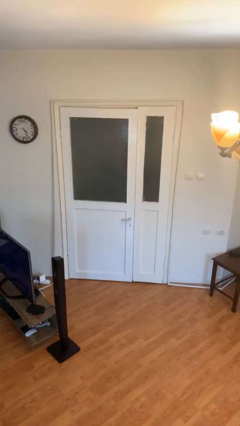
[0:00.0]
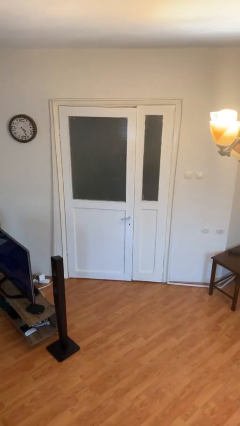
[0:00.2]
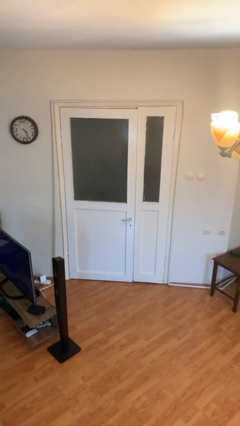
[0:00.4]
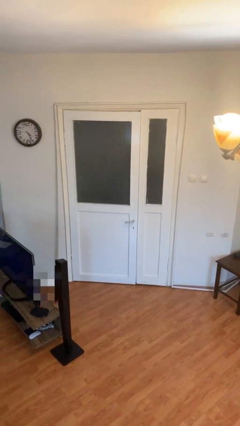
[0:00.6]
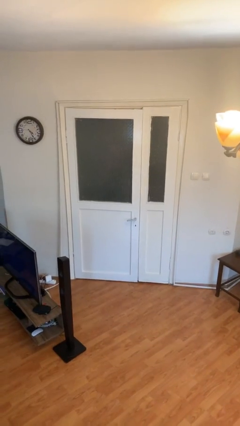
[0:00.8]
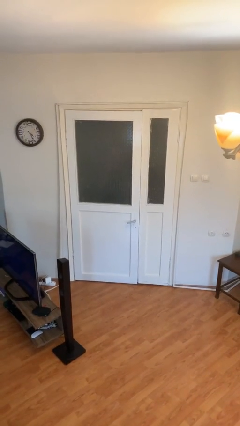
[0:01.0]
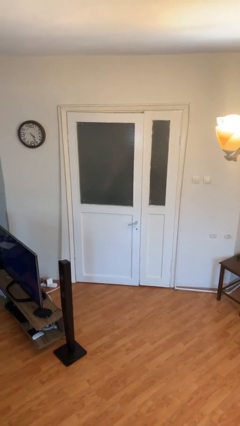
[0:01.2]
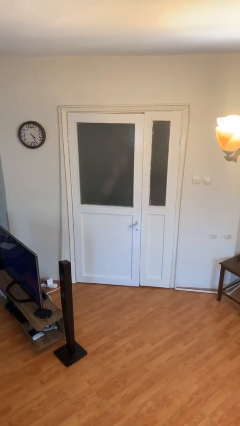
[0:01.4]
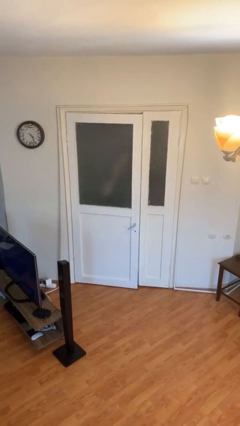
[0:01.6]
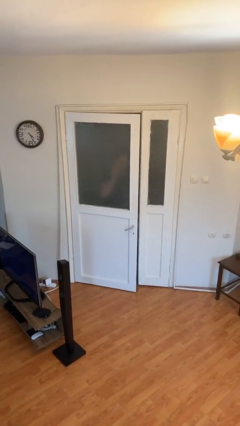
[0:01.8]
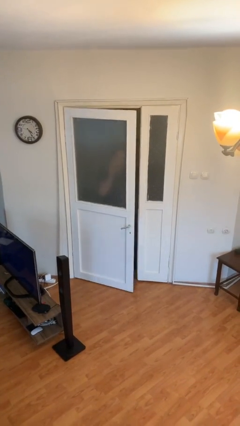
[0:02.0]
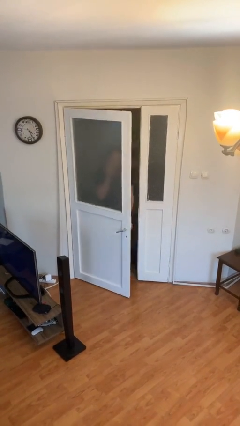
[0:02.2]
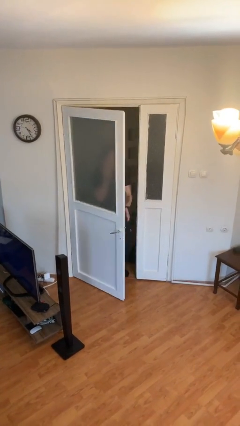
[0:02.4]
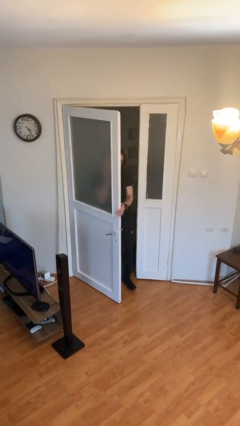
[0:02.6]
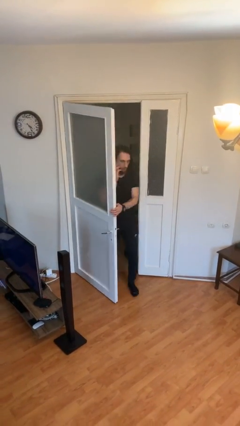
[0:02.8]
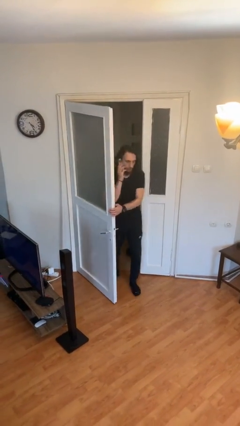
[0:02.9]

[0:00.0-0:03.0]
person opens facility door

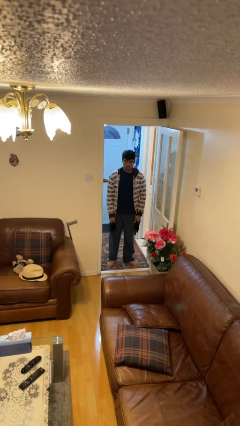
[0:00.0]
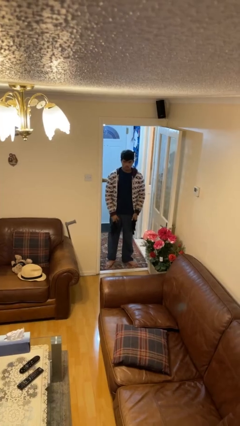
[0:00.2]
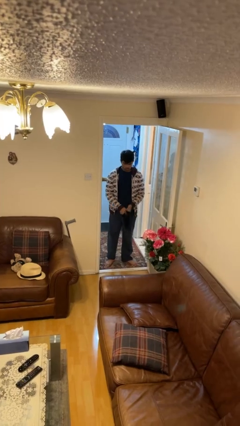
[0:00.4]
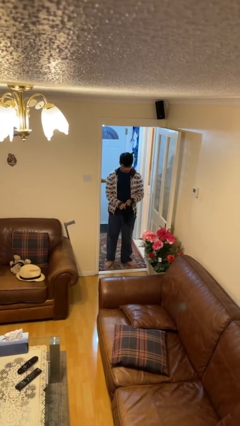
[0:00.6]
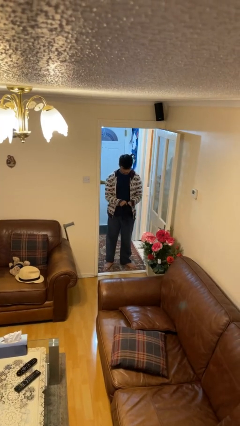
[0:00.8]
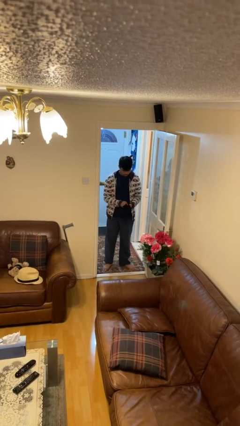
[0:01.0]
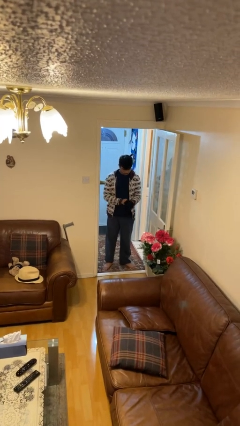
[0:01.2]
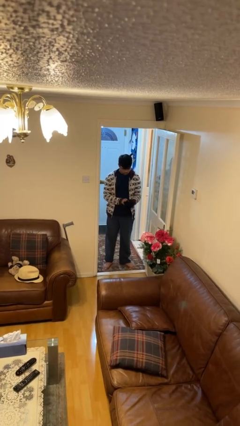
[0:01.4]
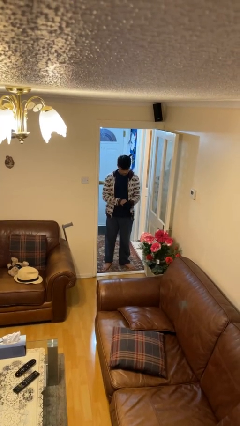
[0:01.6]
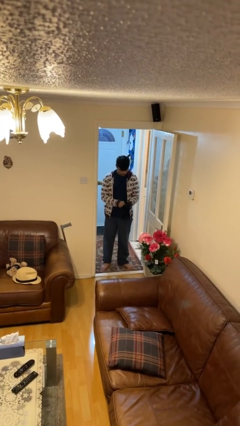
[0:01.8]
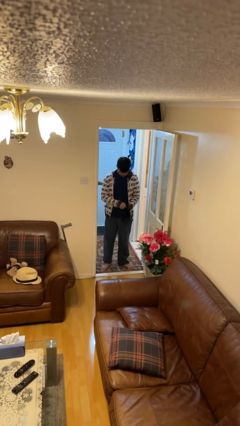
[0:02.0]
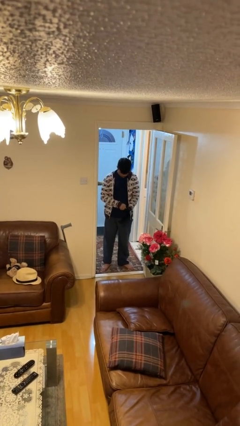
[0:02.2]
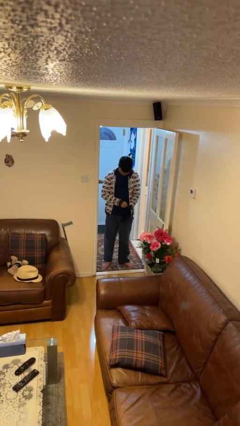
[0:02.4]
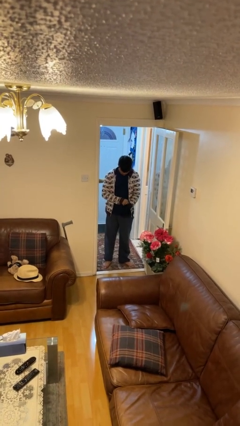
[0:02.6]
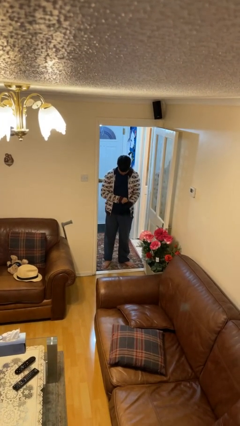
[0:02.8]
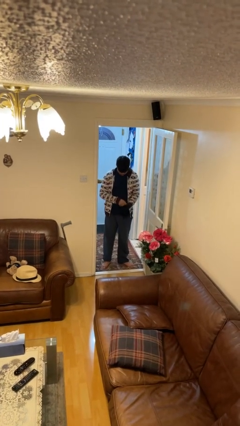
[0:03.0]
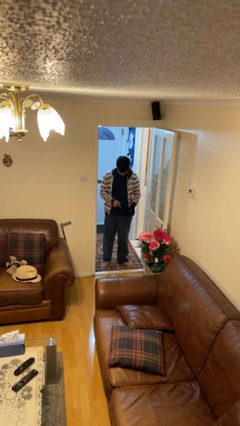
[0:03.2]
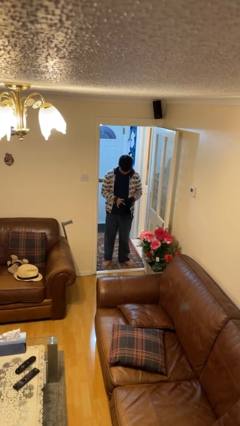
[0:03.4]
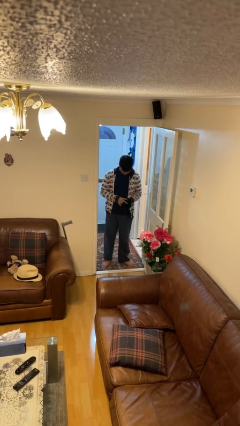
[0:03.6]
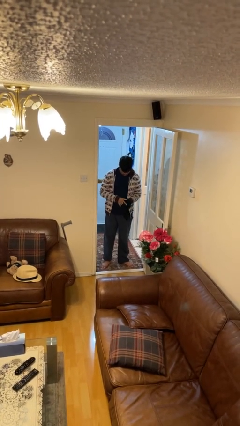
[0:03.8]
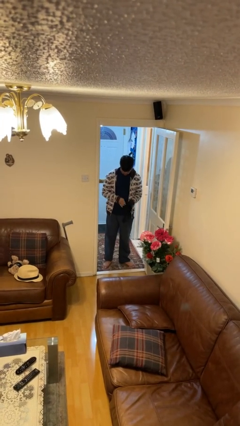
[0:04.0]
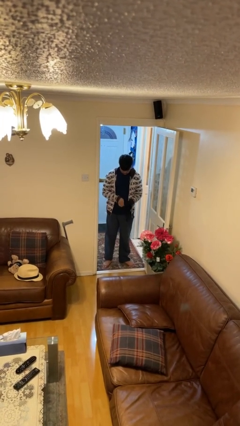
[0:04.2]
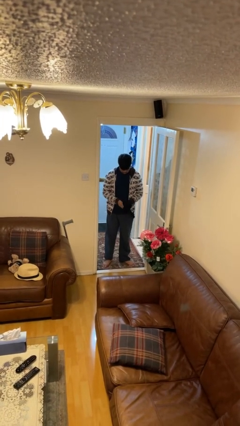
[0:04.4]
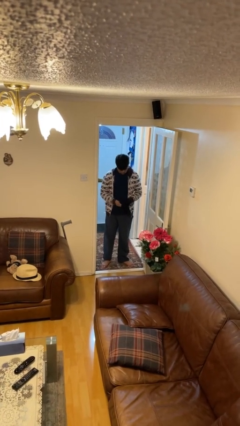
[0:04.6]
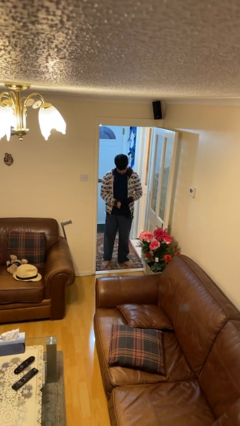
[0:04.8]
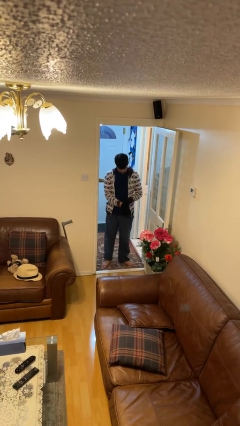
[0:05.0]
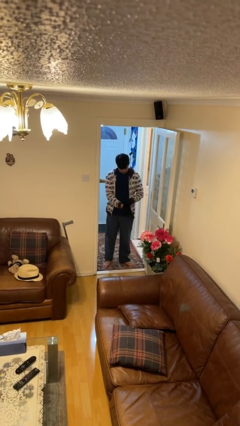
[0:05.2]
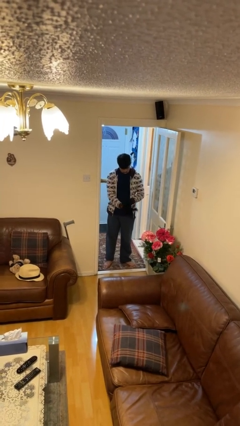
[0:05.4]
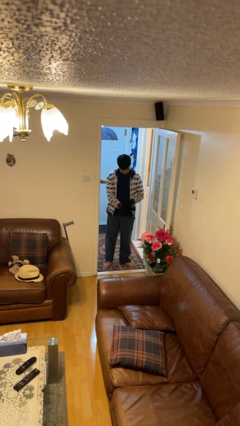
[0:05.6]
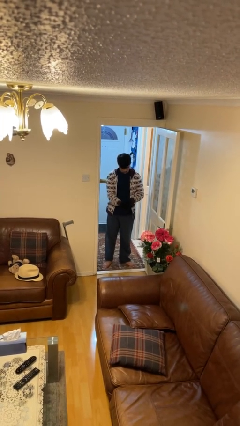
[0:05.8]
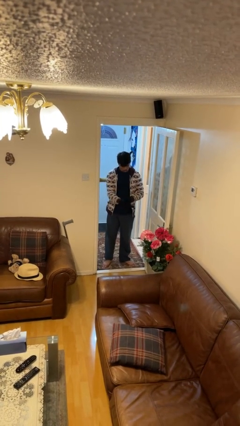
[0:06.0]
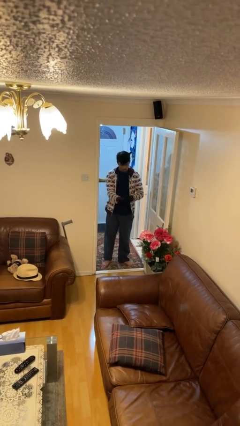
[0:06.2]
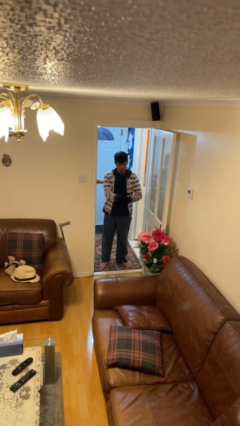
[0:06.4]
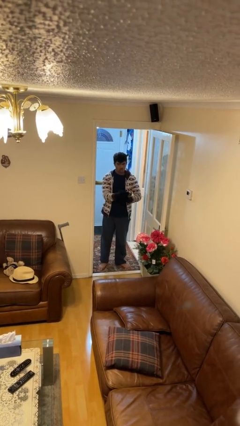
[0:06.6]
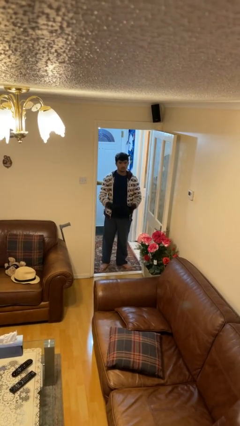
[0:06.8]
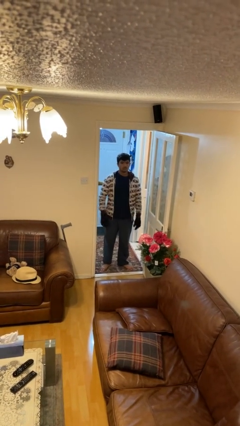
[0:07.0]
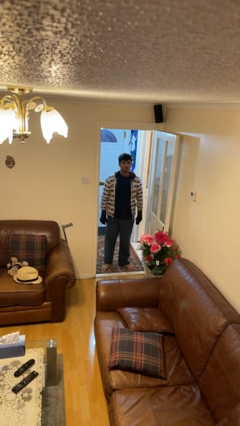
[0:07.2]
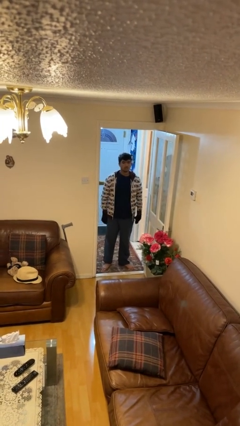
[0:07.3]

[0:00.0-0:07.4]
person puts on gloves

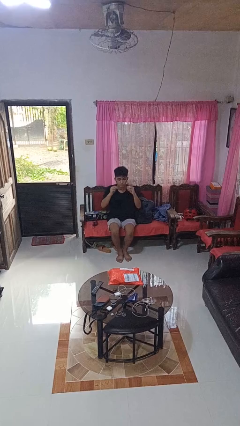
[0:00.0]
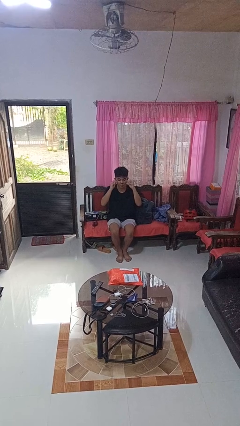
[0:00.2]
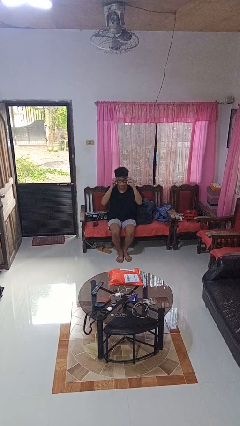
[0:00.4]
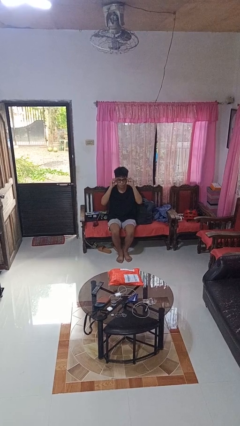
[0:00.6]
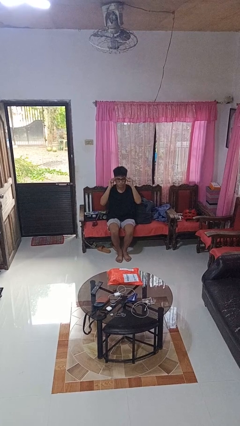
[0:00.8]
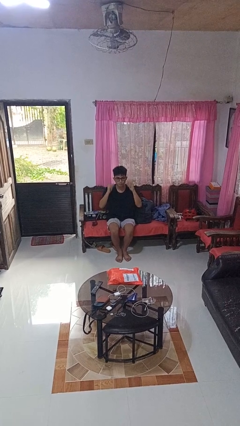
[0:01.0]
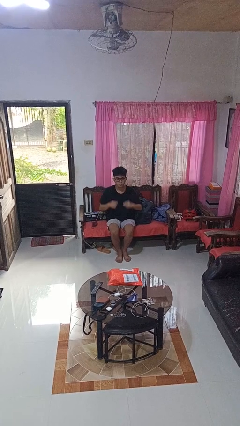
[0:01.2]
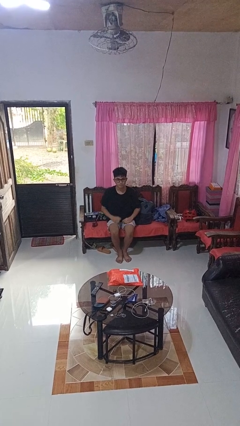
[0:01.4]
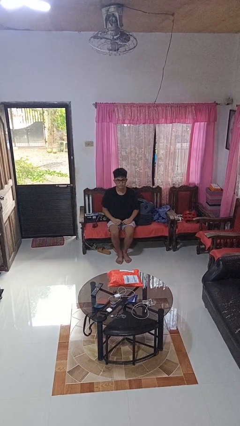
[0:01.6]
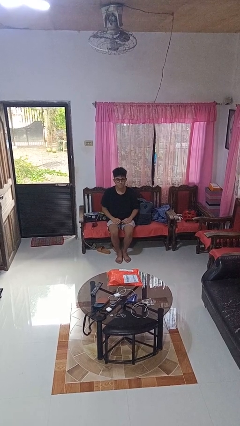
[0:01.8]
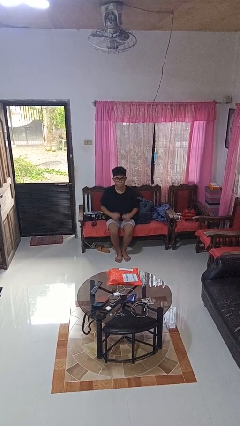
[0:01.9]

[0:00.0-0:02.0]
person puts on glasses

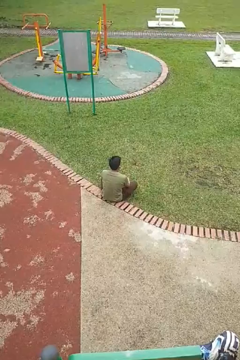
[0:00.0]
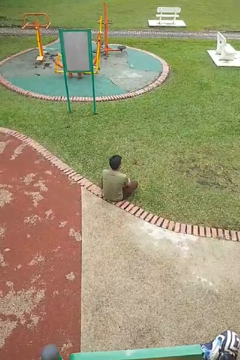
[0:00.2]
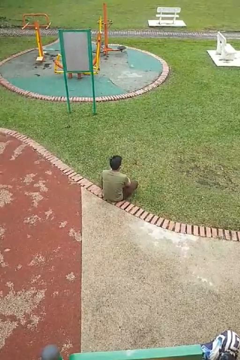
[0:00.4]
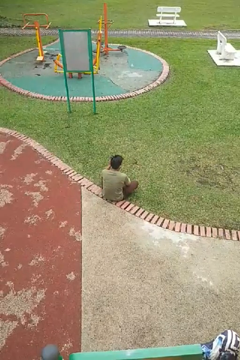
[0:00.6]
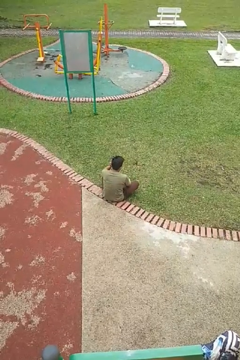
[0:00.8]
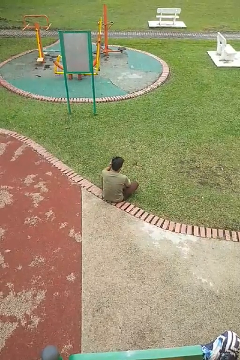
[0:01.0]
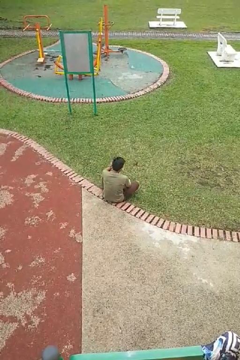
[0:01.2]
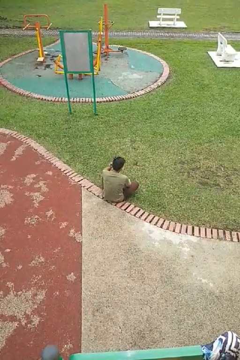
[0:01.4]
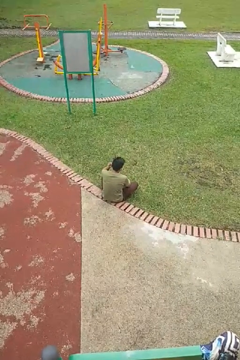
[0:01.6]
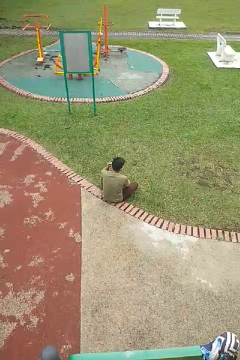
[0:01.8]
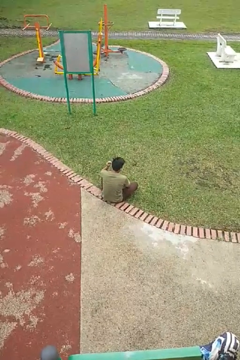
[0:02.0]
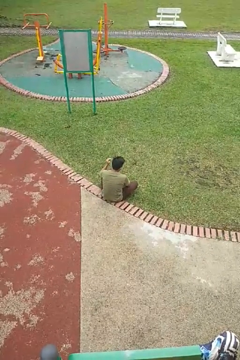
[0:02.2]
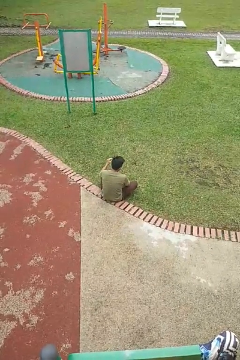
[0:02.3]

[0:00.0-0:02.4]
person touches earlobe

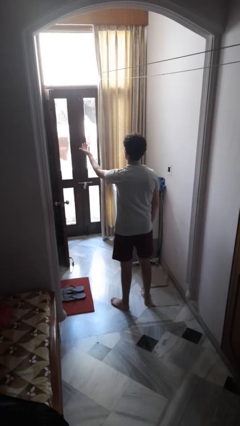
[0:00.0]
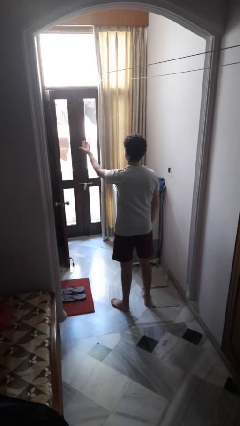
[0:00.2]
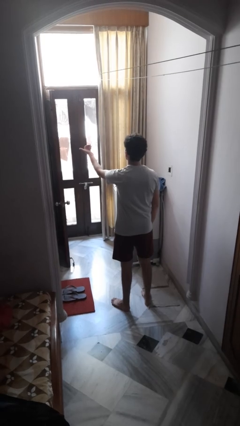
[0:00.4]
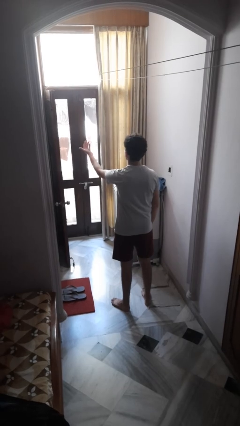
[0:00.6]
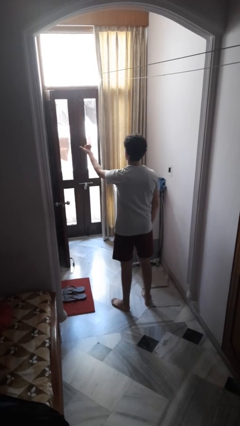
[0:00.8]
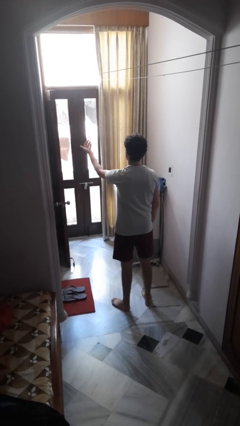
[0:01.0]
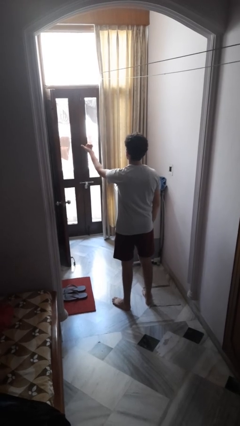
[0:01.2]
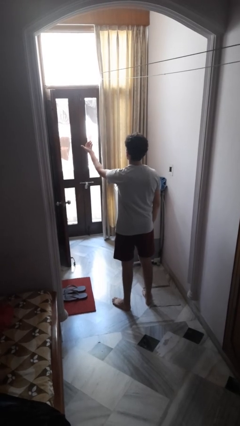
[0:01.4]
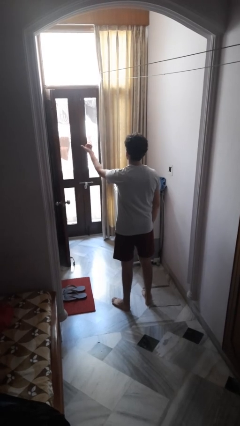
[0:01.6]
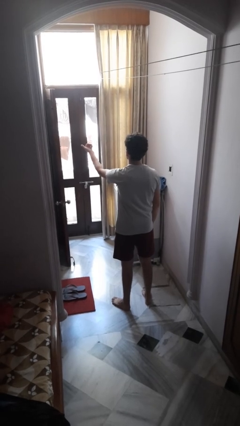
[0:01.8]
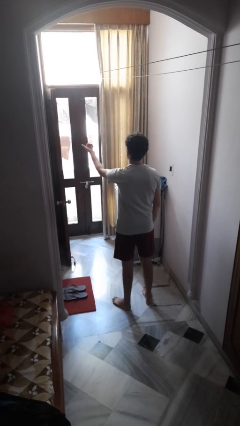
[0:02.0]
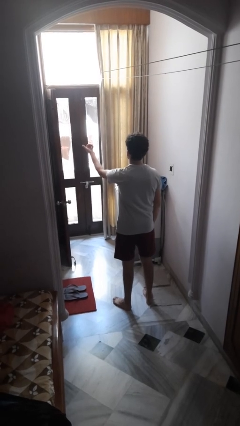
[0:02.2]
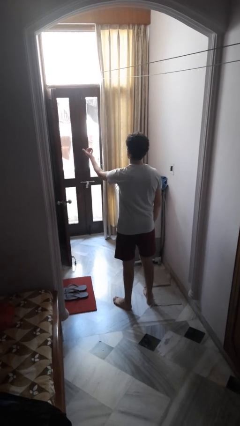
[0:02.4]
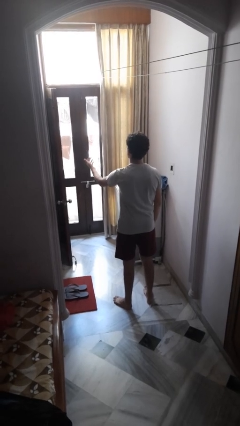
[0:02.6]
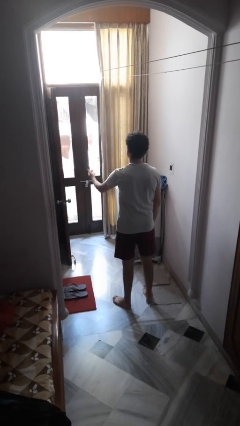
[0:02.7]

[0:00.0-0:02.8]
person gestures come here

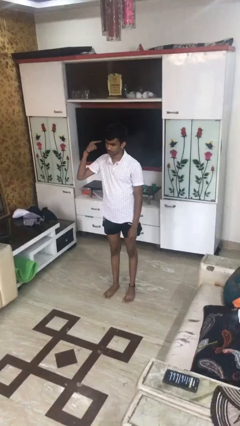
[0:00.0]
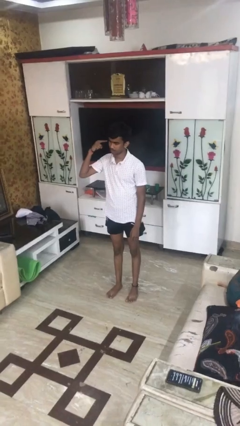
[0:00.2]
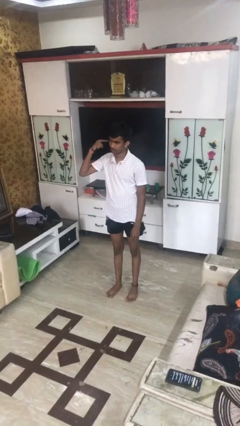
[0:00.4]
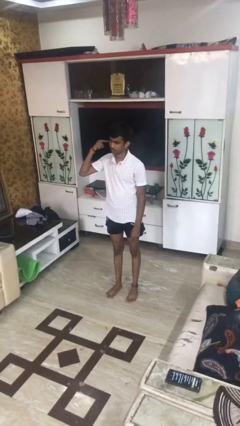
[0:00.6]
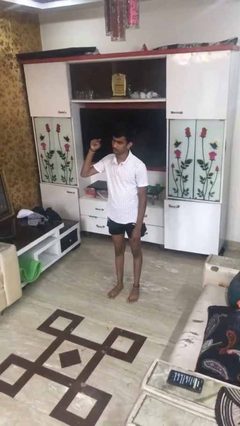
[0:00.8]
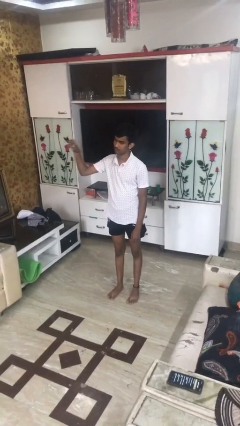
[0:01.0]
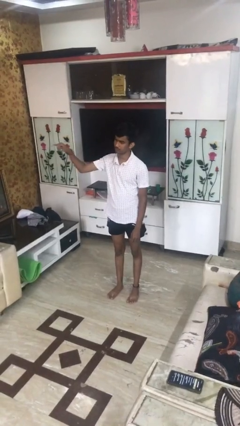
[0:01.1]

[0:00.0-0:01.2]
person gestures listen closely
